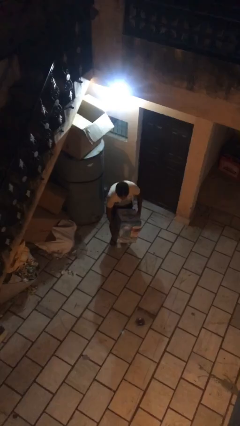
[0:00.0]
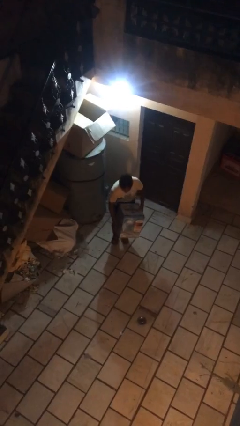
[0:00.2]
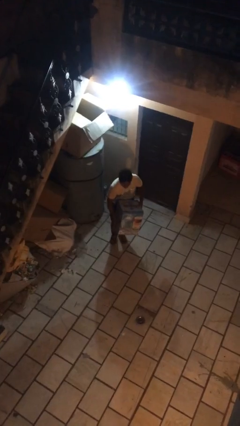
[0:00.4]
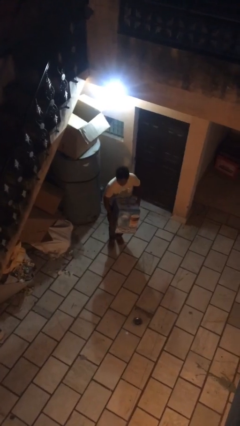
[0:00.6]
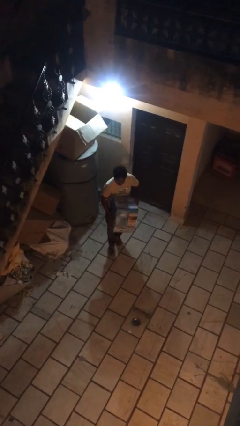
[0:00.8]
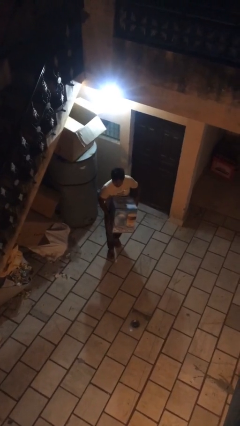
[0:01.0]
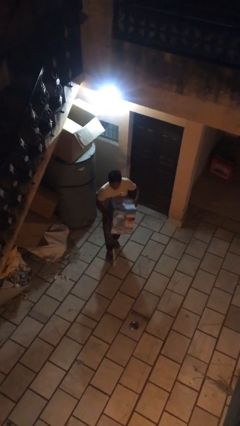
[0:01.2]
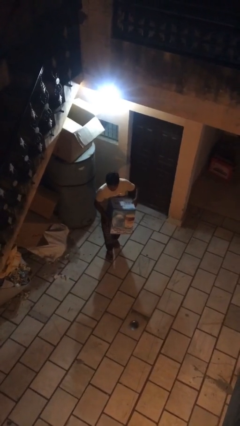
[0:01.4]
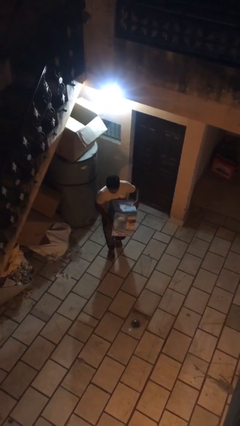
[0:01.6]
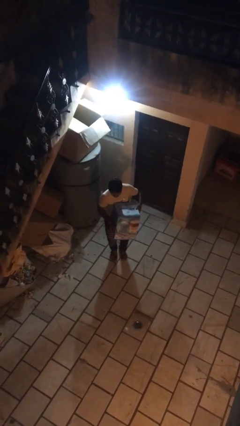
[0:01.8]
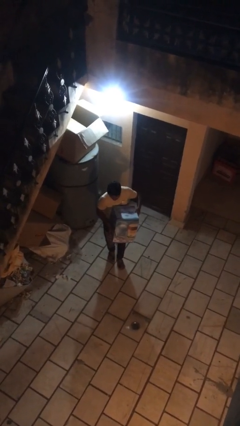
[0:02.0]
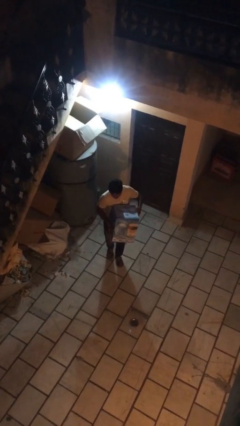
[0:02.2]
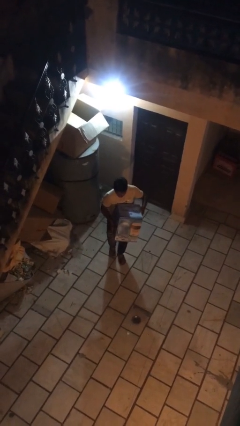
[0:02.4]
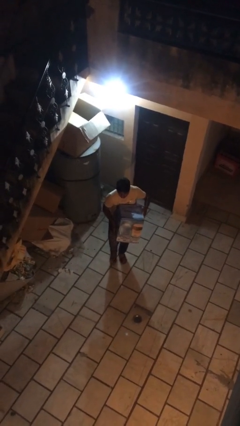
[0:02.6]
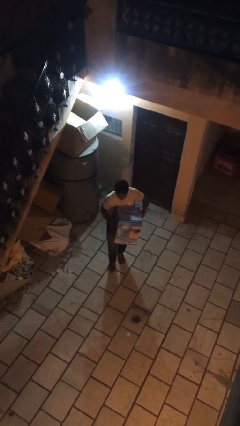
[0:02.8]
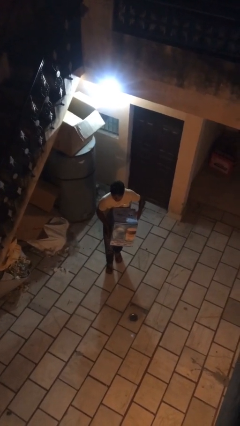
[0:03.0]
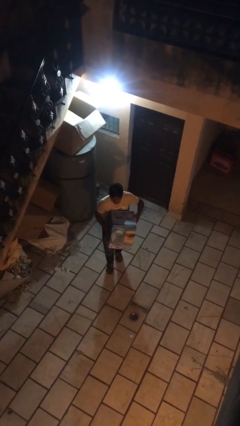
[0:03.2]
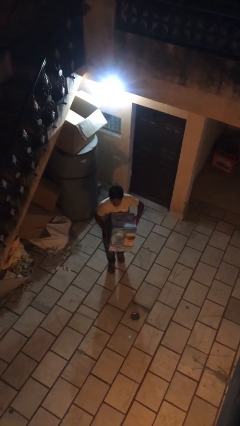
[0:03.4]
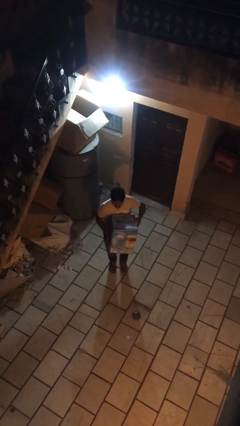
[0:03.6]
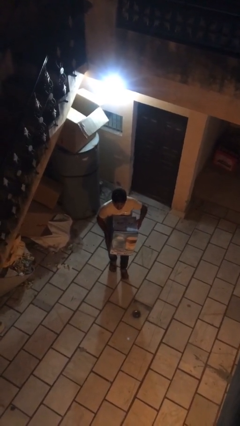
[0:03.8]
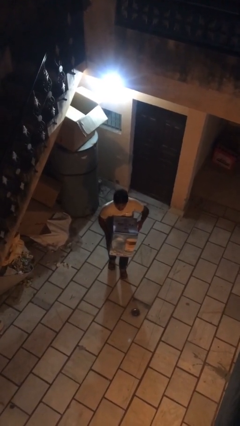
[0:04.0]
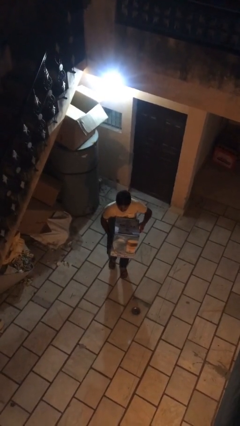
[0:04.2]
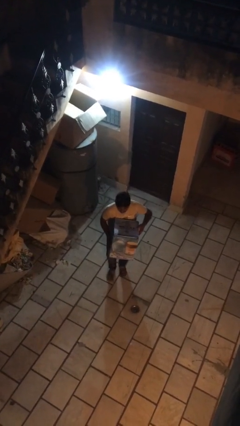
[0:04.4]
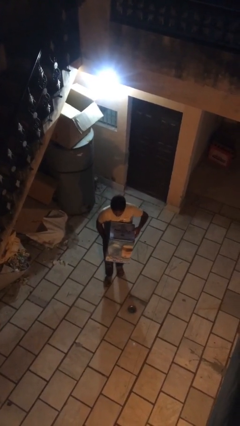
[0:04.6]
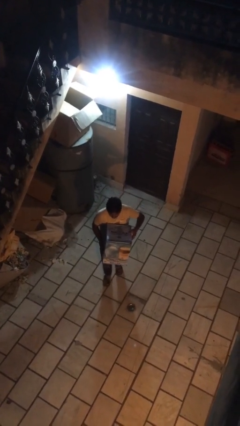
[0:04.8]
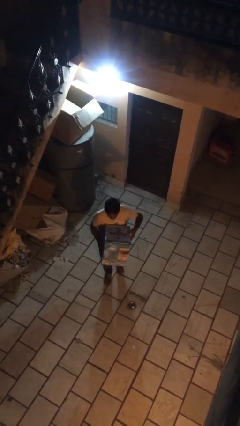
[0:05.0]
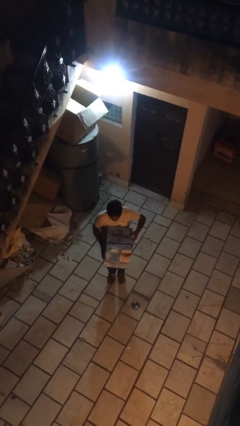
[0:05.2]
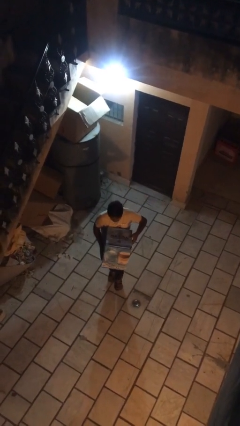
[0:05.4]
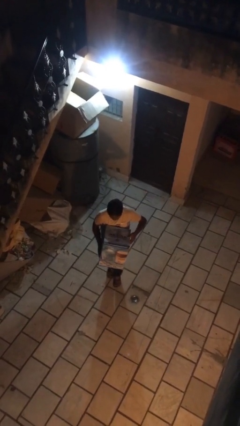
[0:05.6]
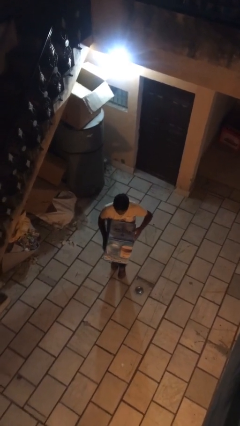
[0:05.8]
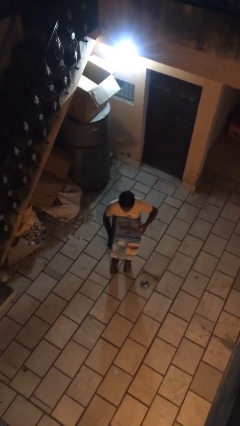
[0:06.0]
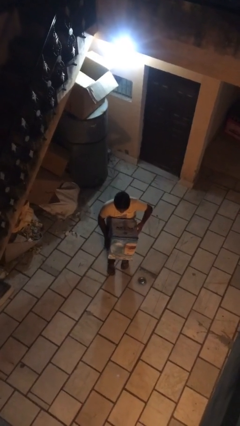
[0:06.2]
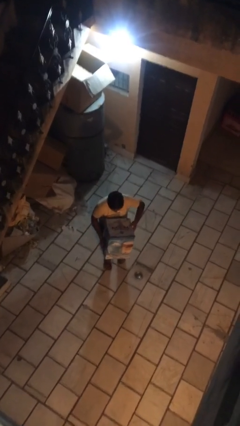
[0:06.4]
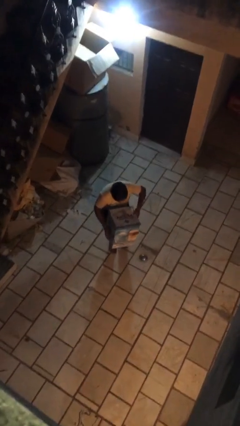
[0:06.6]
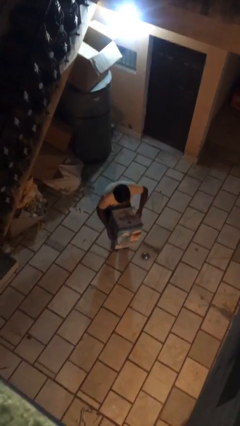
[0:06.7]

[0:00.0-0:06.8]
person carries heavy object

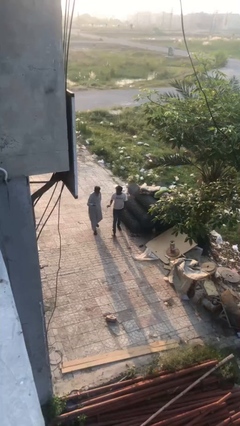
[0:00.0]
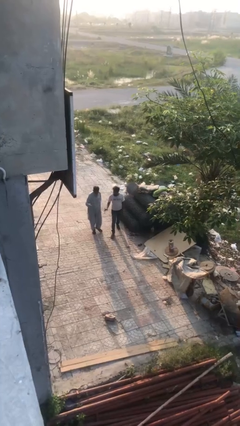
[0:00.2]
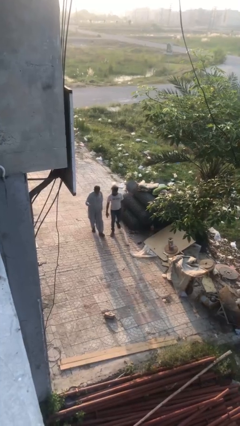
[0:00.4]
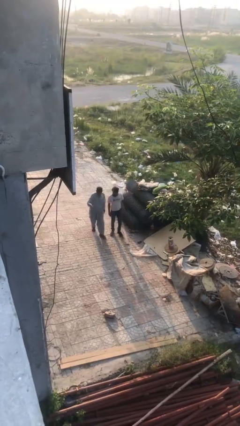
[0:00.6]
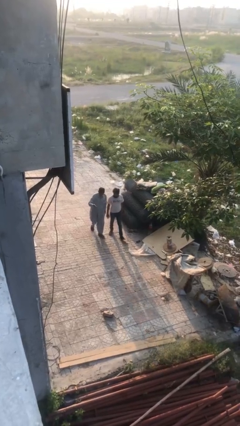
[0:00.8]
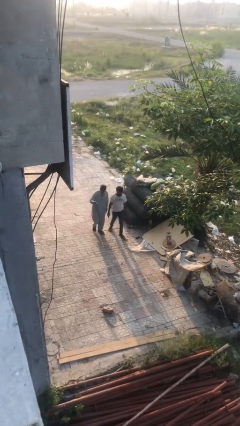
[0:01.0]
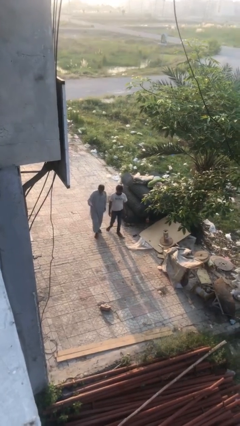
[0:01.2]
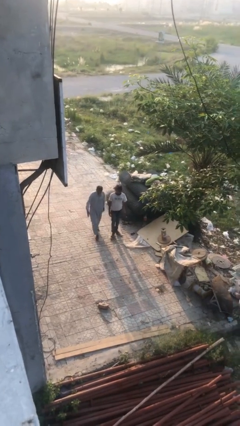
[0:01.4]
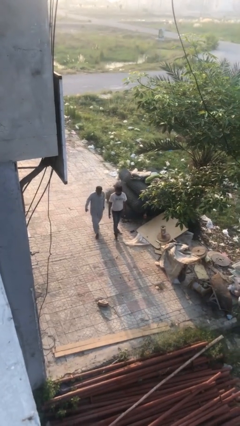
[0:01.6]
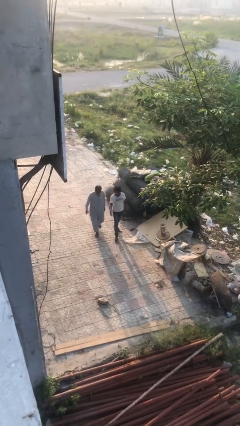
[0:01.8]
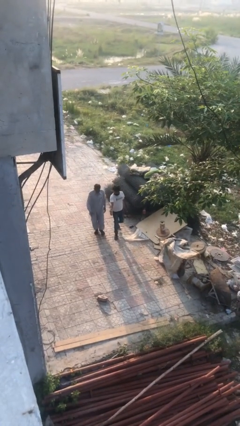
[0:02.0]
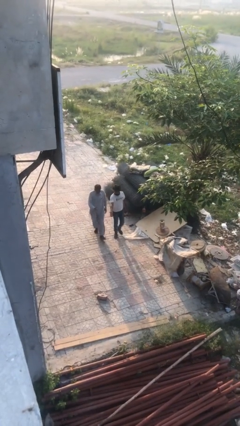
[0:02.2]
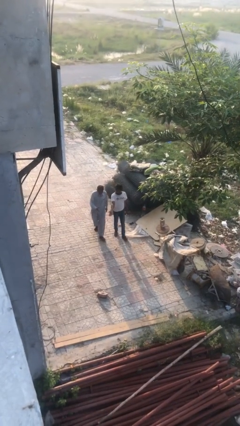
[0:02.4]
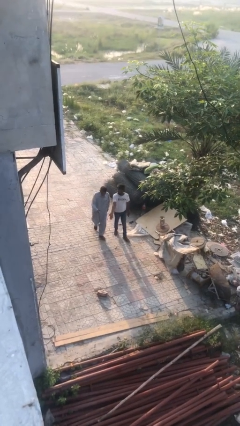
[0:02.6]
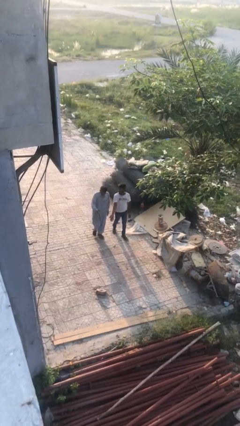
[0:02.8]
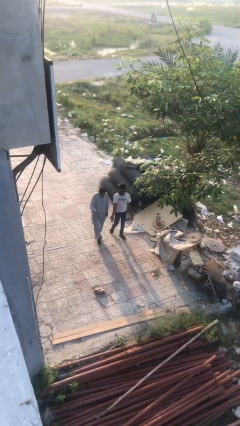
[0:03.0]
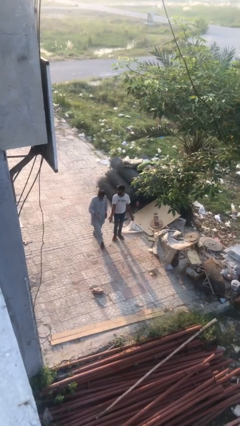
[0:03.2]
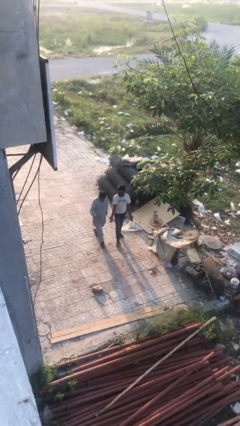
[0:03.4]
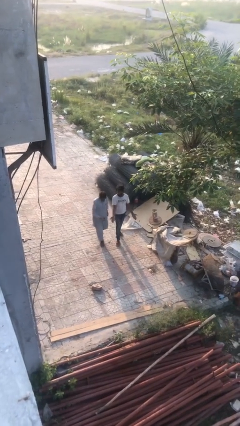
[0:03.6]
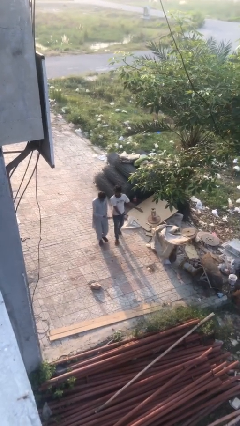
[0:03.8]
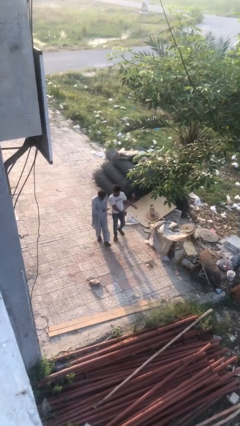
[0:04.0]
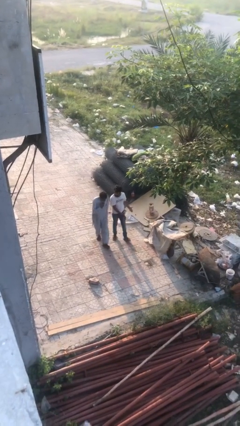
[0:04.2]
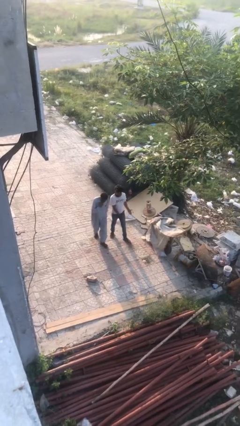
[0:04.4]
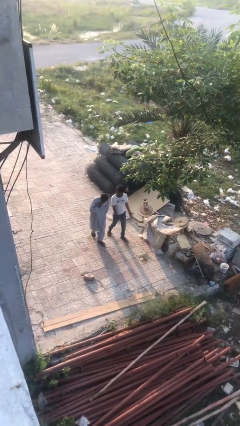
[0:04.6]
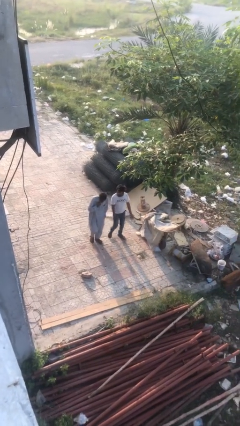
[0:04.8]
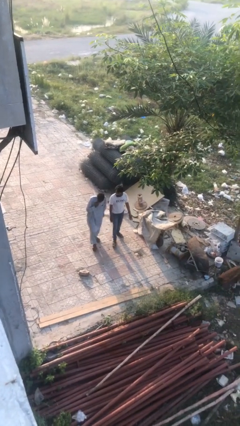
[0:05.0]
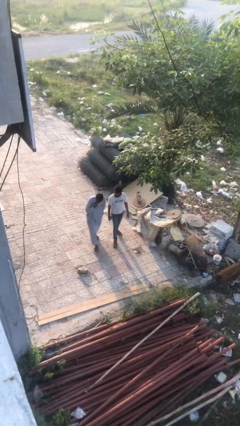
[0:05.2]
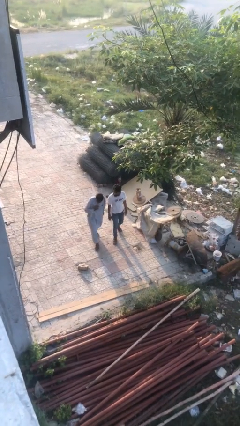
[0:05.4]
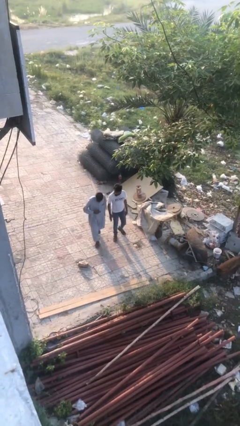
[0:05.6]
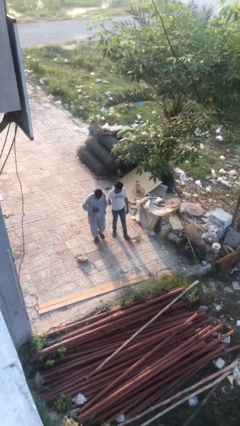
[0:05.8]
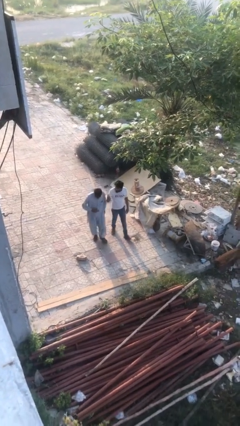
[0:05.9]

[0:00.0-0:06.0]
person talks to person

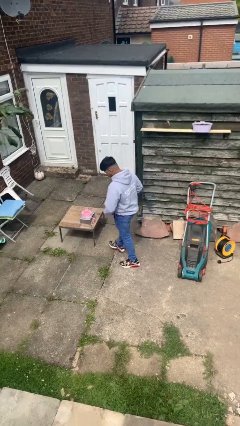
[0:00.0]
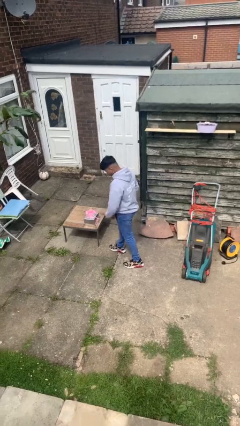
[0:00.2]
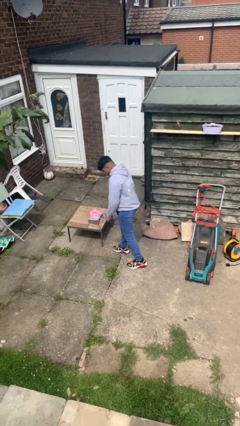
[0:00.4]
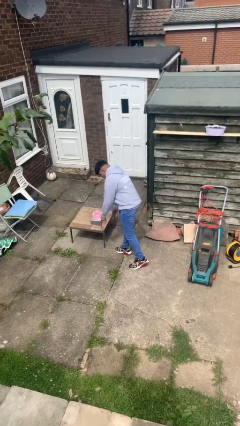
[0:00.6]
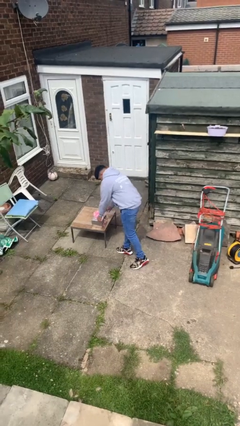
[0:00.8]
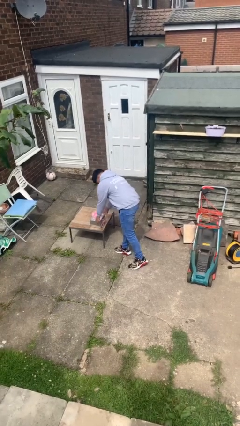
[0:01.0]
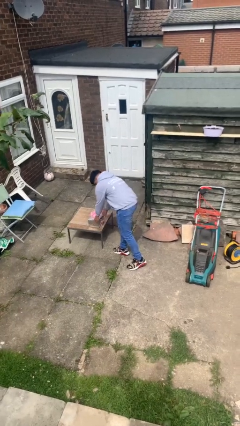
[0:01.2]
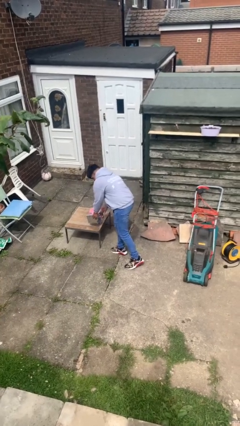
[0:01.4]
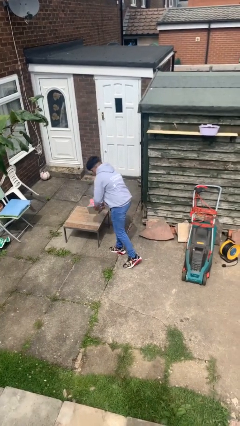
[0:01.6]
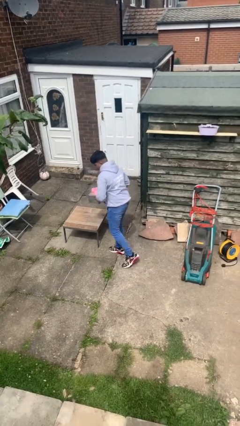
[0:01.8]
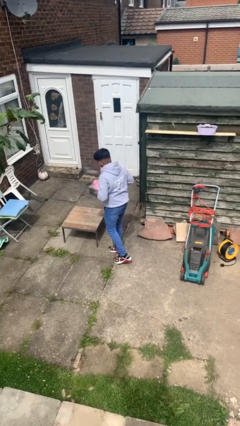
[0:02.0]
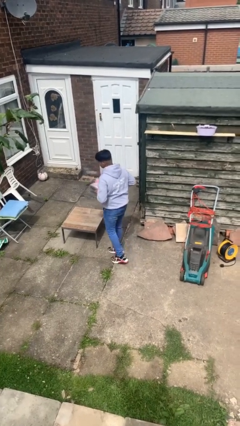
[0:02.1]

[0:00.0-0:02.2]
person picks up object from table

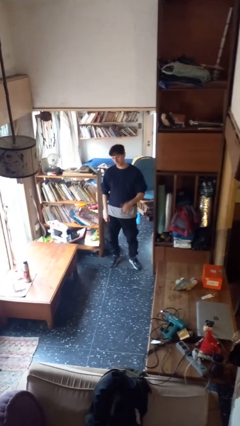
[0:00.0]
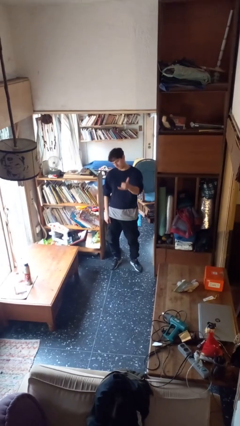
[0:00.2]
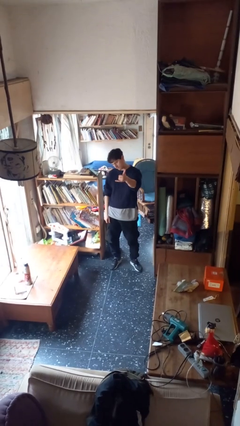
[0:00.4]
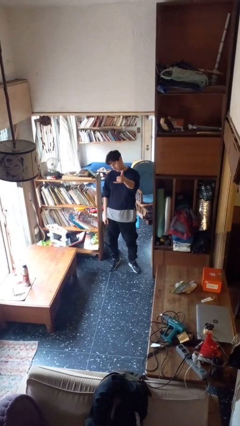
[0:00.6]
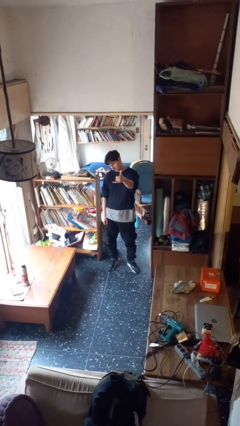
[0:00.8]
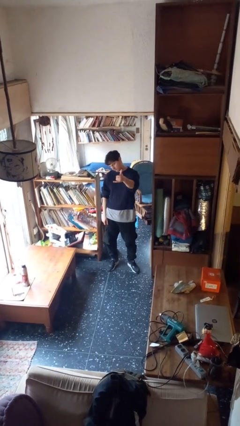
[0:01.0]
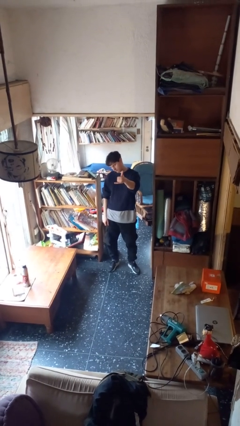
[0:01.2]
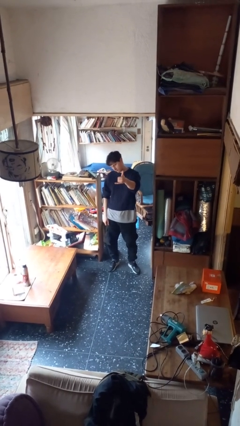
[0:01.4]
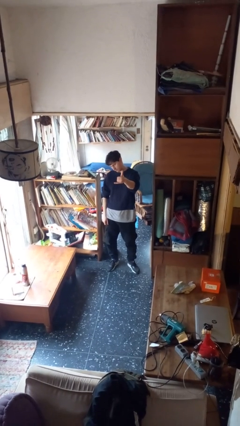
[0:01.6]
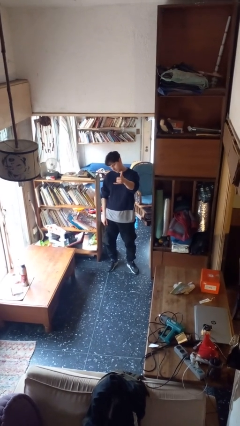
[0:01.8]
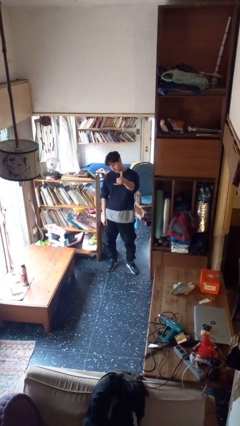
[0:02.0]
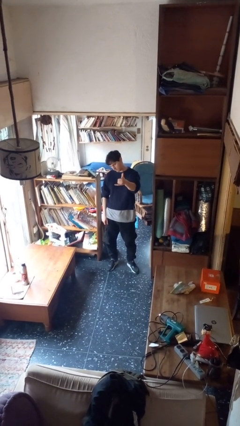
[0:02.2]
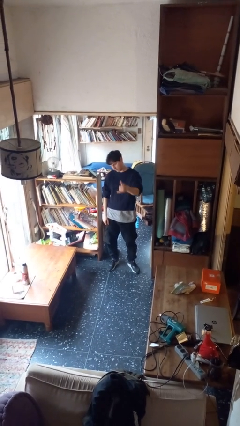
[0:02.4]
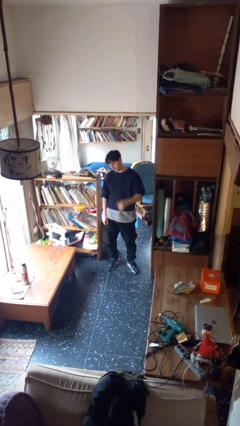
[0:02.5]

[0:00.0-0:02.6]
person gestures hang loose
